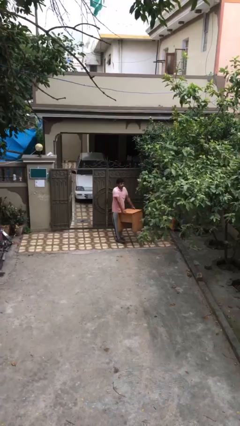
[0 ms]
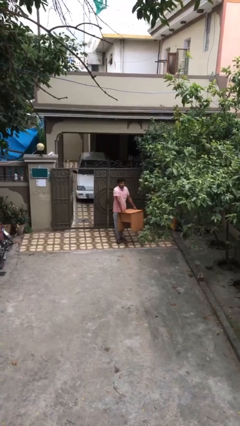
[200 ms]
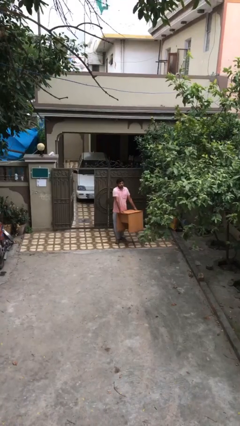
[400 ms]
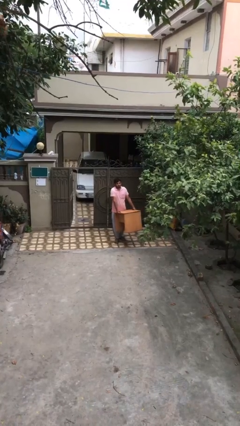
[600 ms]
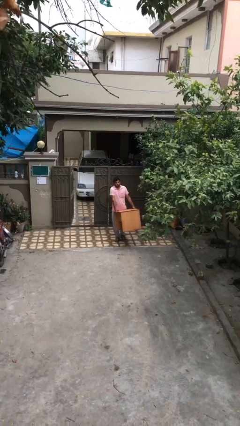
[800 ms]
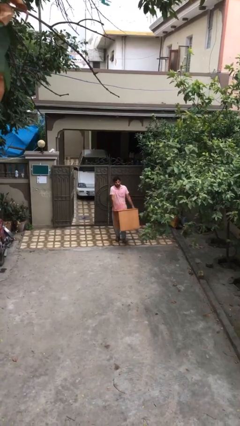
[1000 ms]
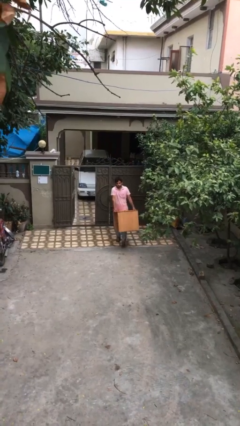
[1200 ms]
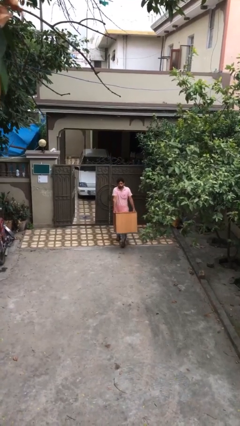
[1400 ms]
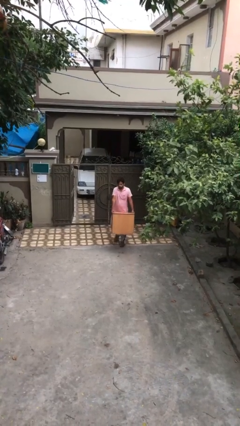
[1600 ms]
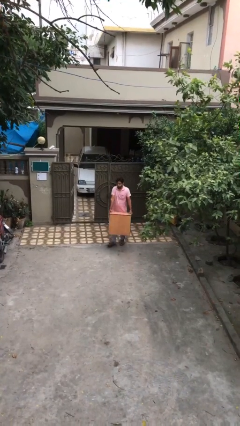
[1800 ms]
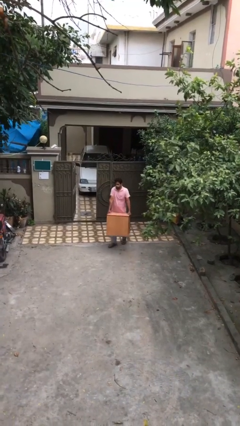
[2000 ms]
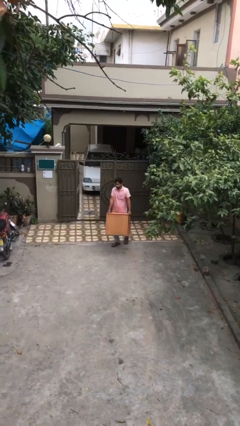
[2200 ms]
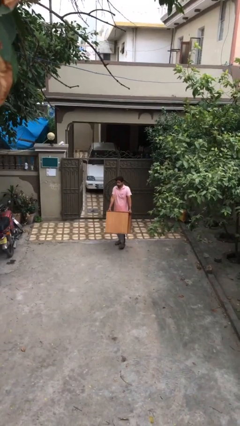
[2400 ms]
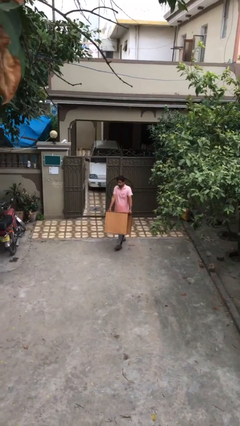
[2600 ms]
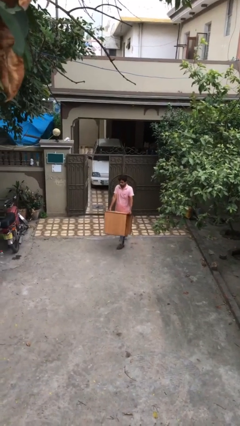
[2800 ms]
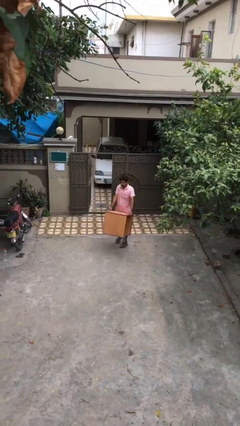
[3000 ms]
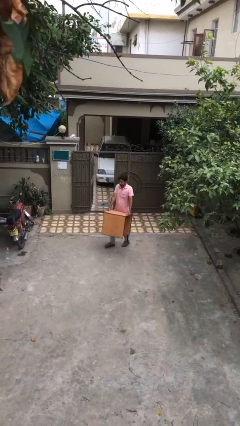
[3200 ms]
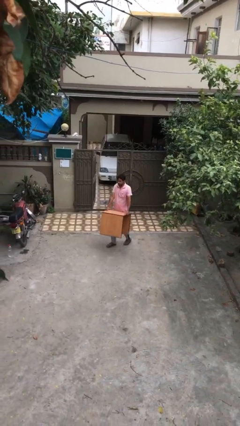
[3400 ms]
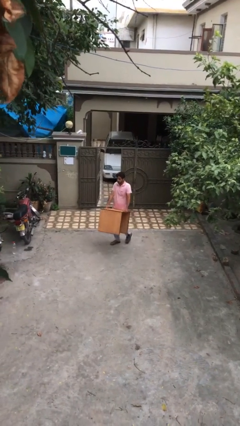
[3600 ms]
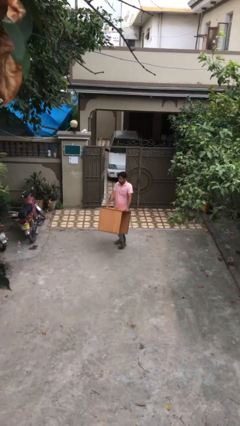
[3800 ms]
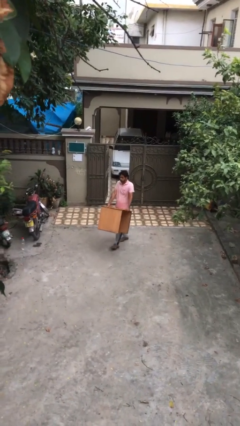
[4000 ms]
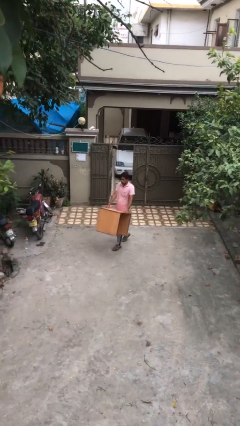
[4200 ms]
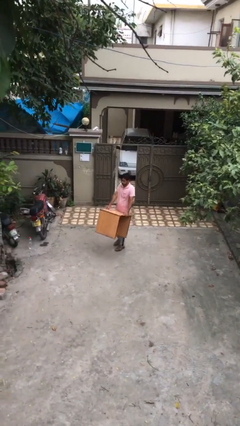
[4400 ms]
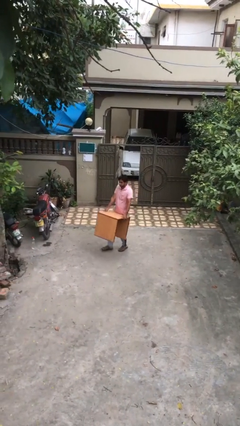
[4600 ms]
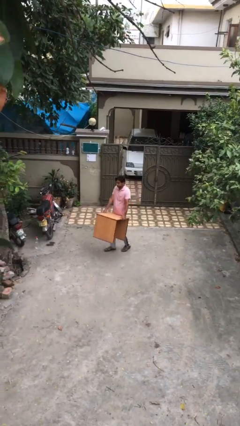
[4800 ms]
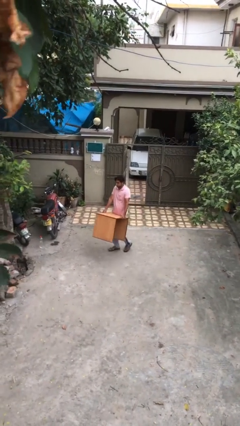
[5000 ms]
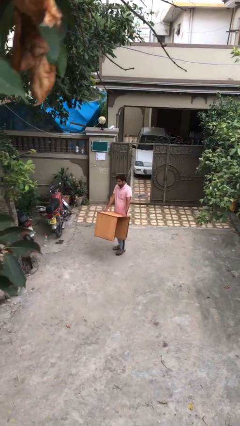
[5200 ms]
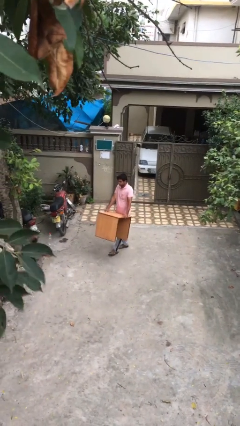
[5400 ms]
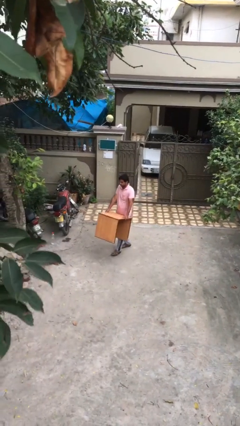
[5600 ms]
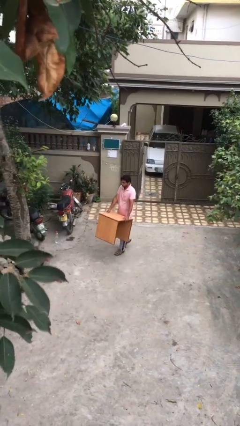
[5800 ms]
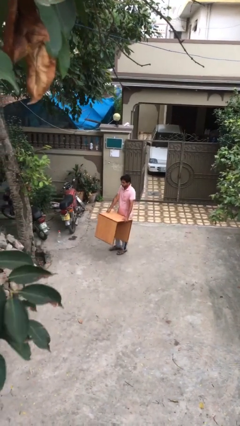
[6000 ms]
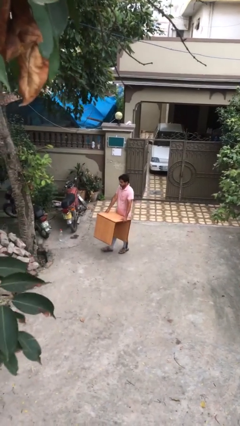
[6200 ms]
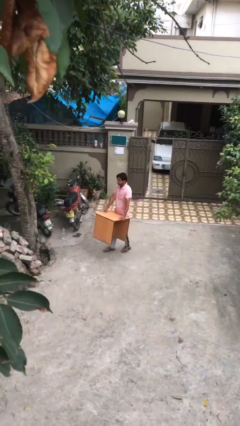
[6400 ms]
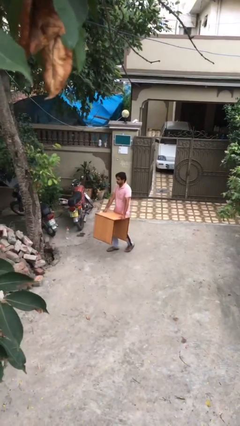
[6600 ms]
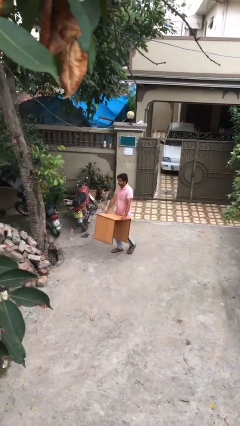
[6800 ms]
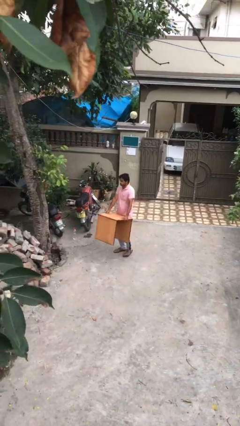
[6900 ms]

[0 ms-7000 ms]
person carries heavy object

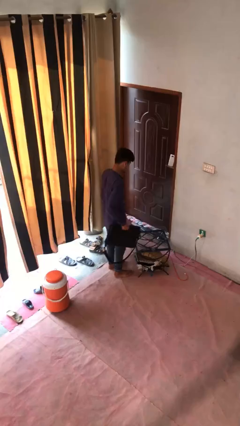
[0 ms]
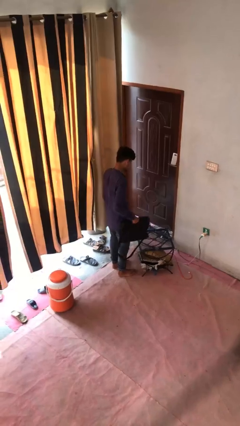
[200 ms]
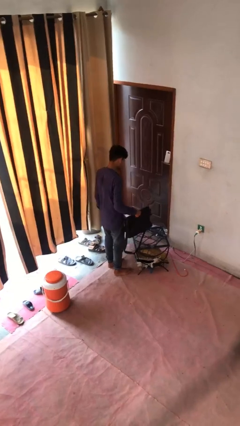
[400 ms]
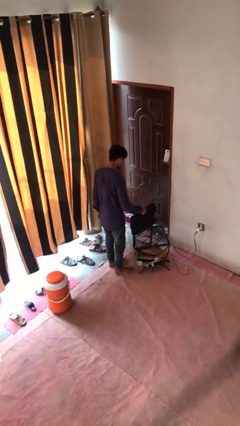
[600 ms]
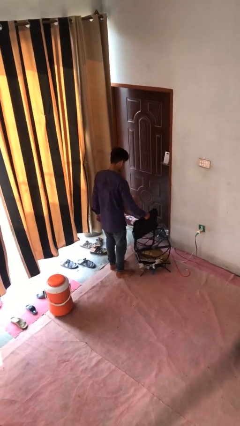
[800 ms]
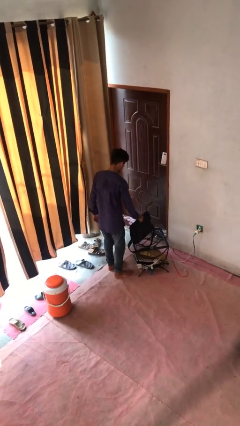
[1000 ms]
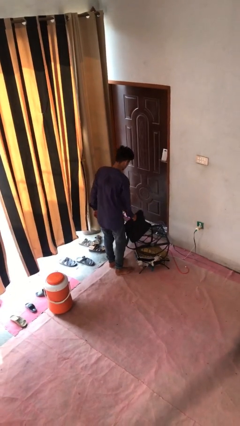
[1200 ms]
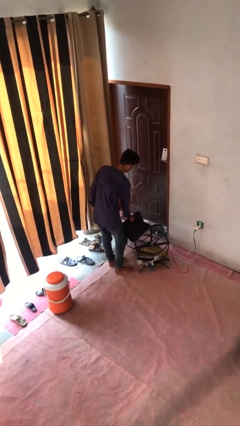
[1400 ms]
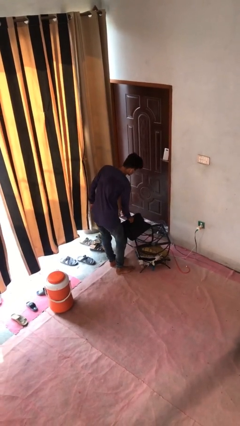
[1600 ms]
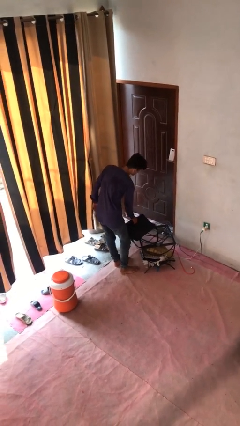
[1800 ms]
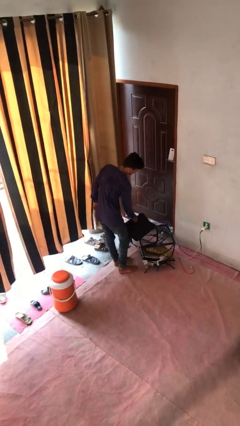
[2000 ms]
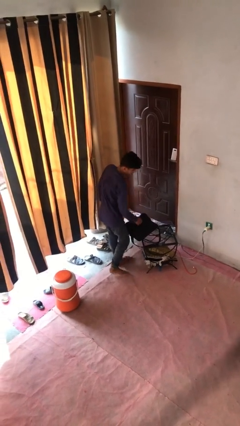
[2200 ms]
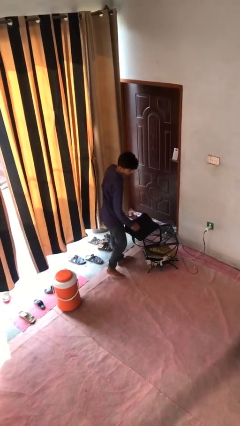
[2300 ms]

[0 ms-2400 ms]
person puts down object on table

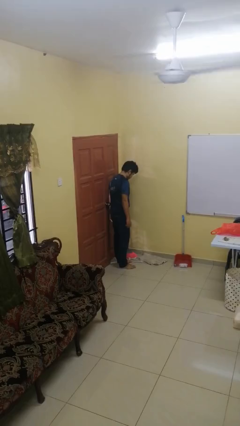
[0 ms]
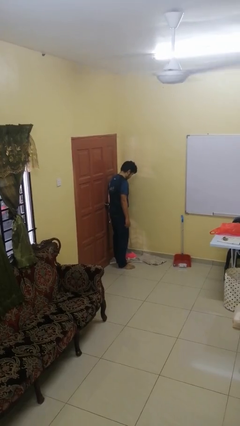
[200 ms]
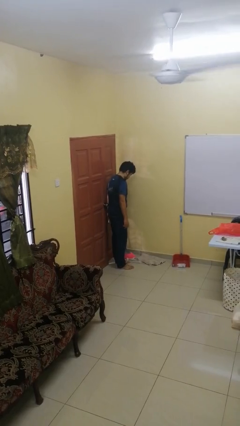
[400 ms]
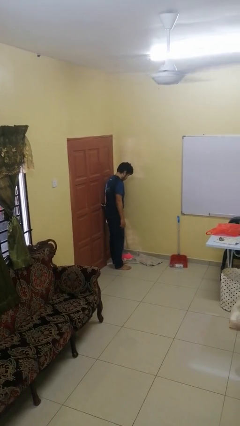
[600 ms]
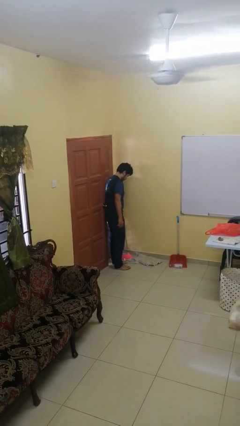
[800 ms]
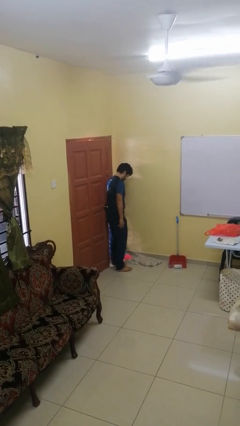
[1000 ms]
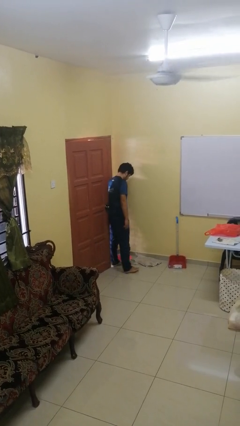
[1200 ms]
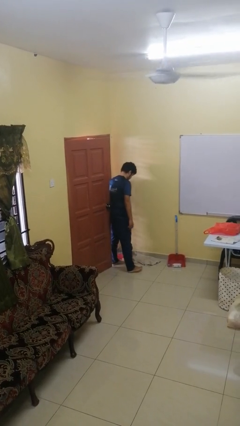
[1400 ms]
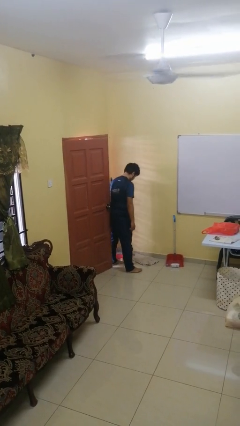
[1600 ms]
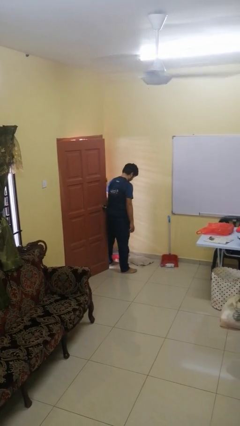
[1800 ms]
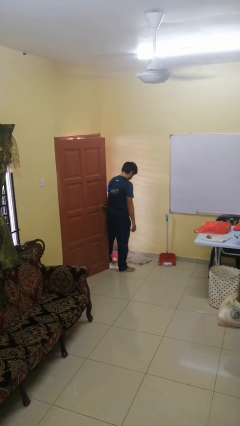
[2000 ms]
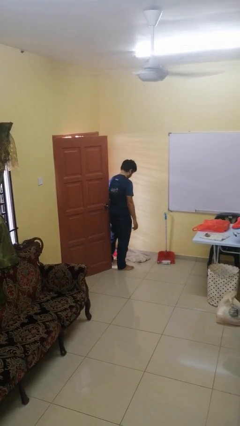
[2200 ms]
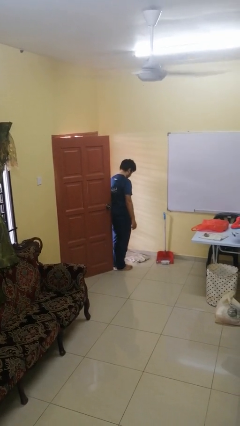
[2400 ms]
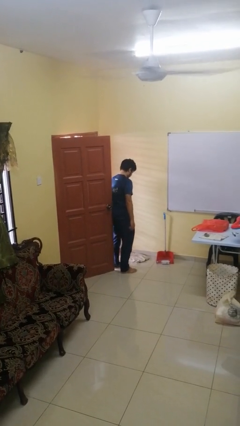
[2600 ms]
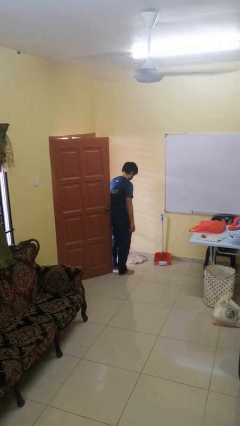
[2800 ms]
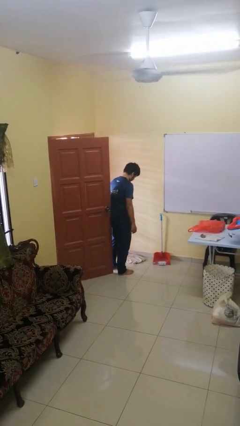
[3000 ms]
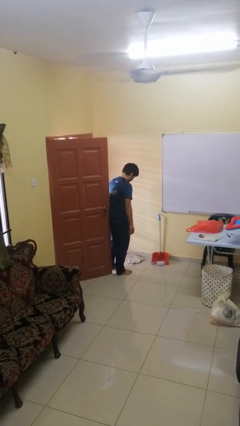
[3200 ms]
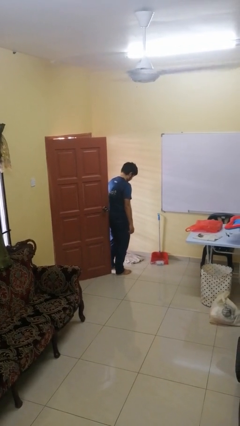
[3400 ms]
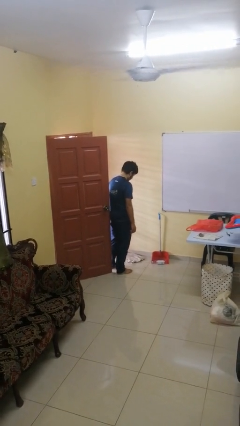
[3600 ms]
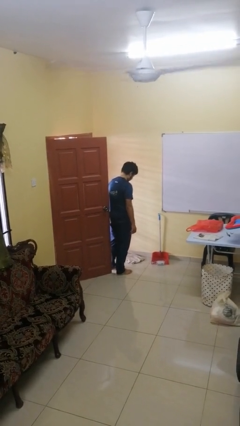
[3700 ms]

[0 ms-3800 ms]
person opens facility door

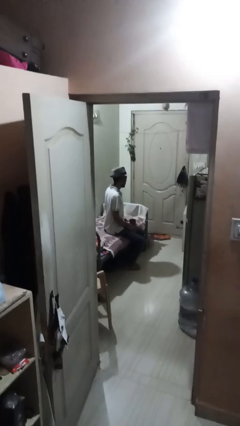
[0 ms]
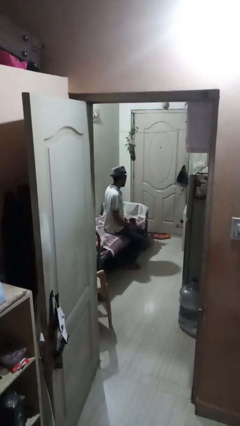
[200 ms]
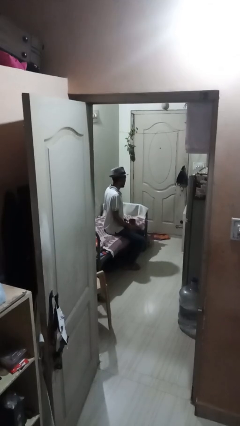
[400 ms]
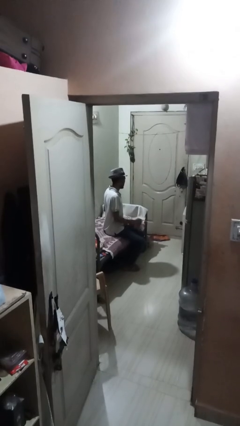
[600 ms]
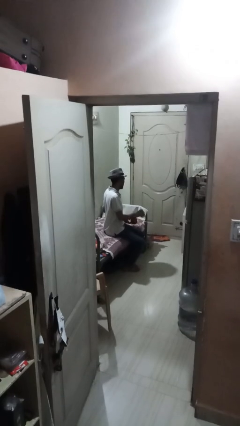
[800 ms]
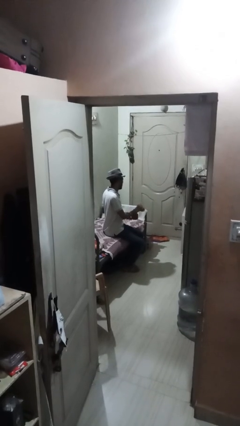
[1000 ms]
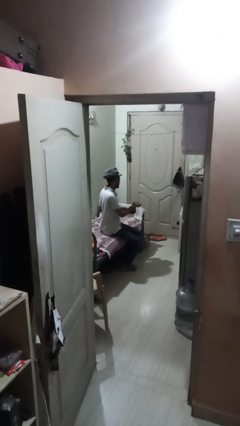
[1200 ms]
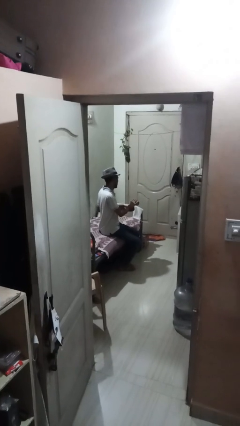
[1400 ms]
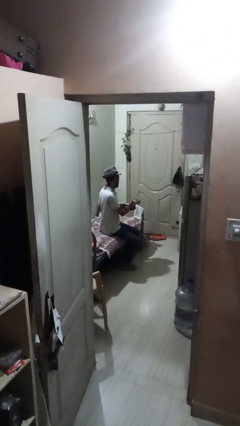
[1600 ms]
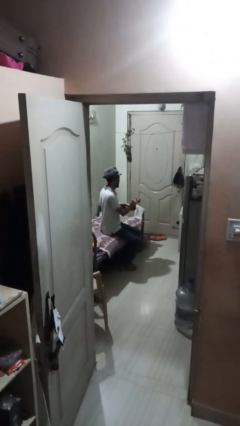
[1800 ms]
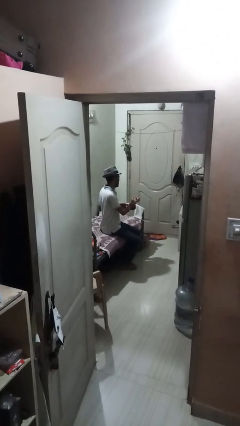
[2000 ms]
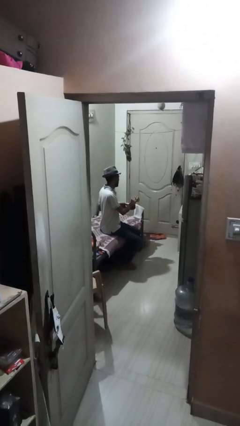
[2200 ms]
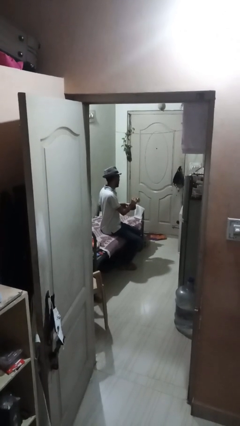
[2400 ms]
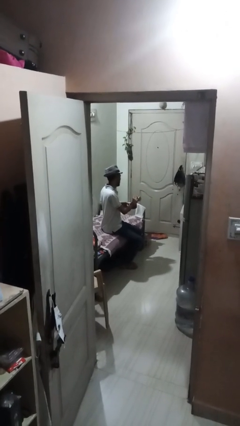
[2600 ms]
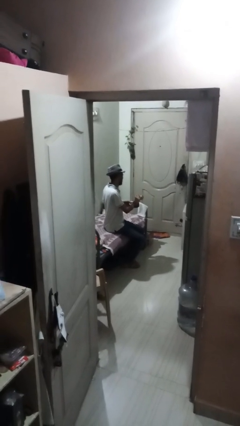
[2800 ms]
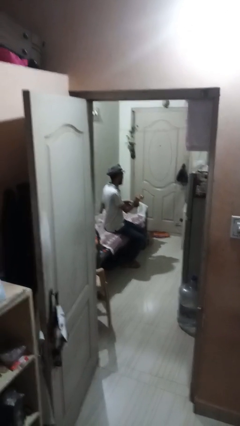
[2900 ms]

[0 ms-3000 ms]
person pours coffee into mug

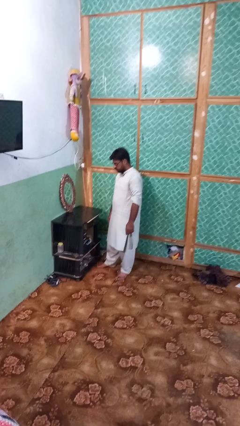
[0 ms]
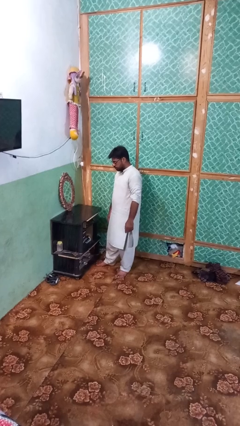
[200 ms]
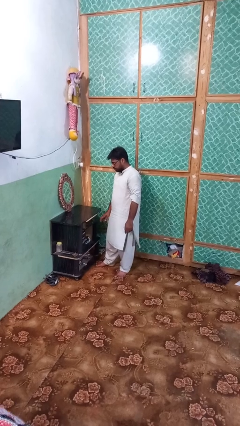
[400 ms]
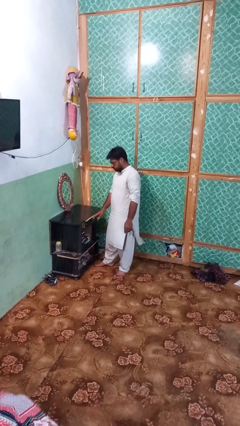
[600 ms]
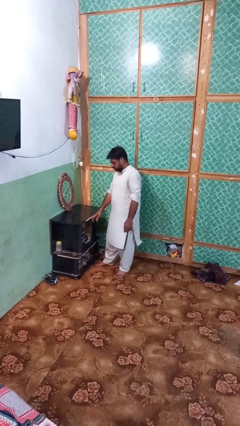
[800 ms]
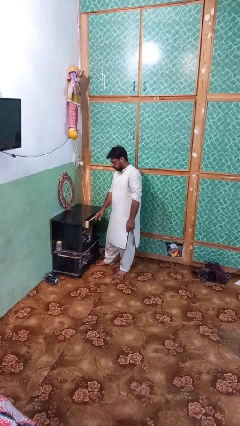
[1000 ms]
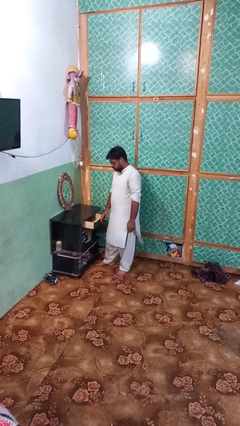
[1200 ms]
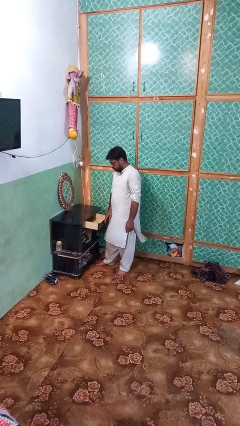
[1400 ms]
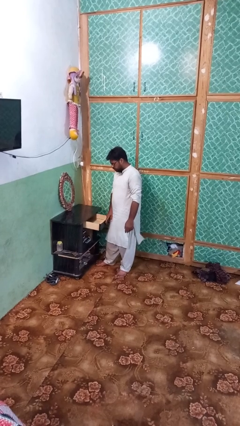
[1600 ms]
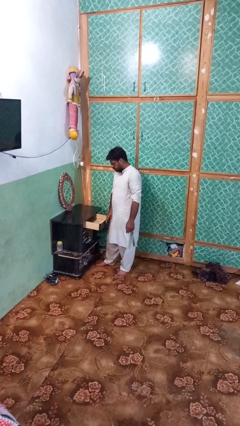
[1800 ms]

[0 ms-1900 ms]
person opens dresser drawer
